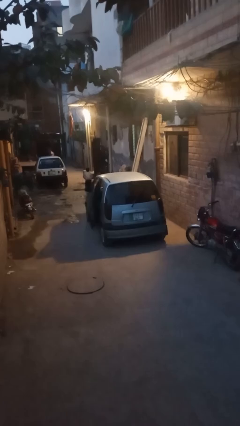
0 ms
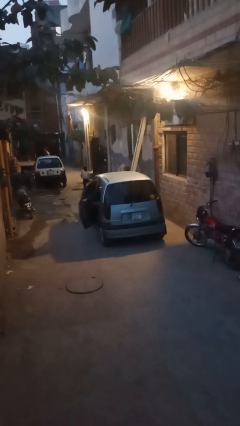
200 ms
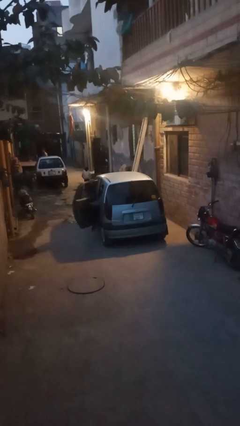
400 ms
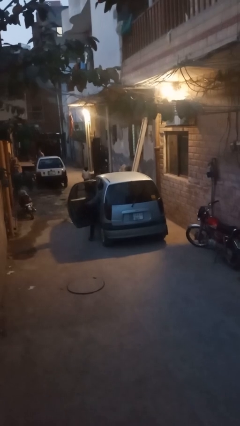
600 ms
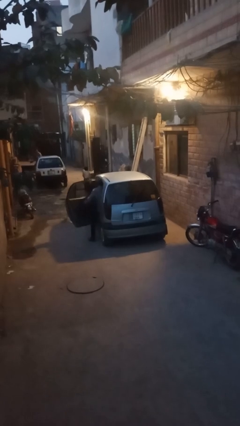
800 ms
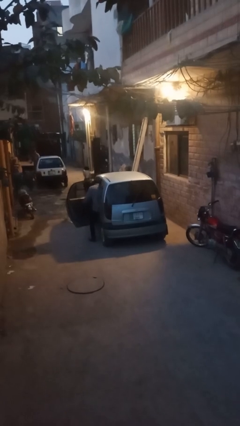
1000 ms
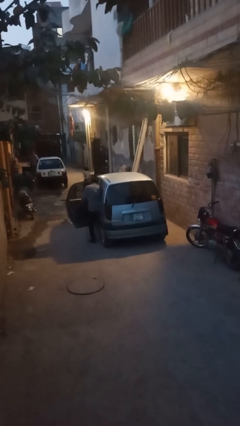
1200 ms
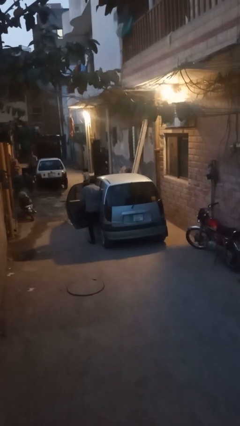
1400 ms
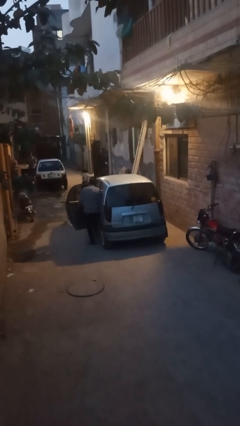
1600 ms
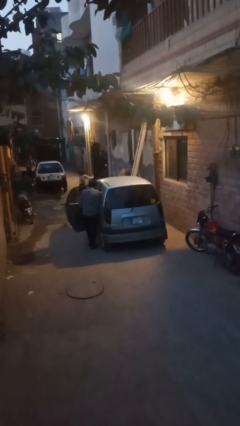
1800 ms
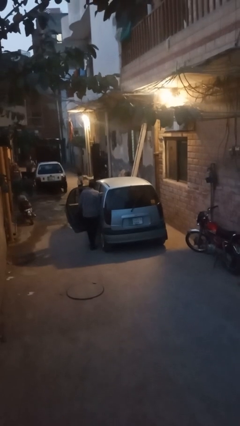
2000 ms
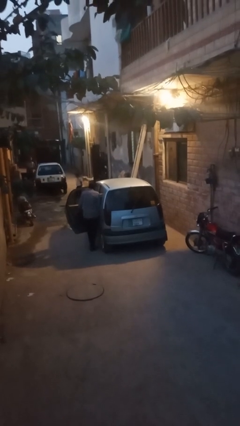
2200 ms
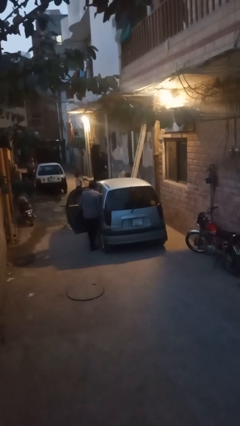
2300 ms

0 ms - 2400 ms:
car drops off person

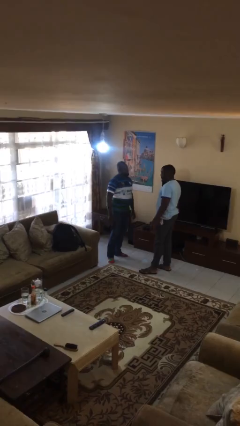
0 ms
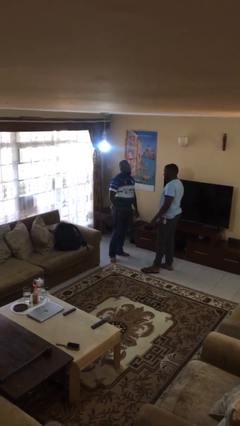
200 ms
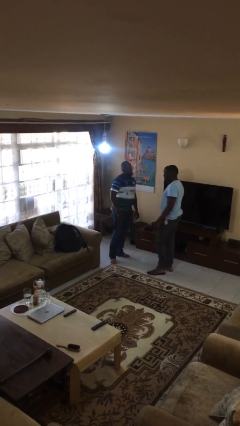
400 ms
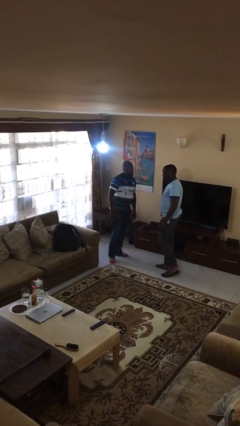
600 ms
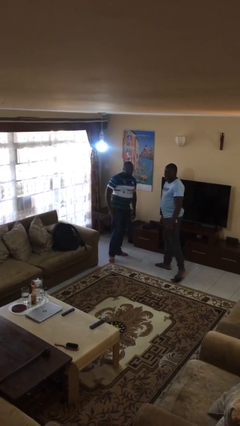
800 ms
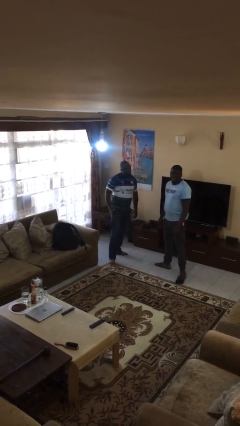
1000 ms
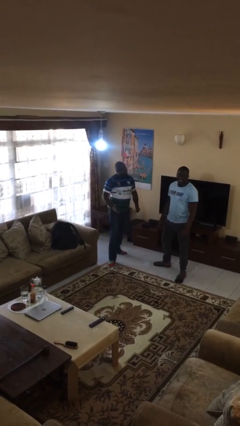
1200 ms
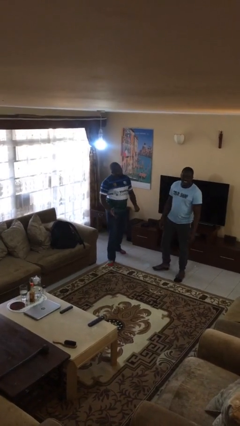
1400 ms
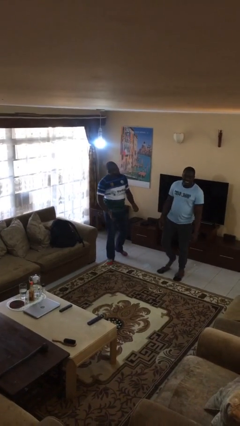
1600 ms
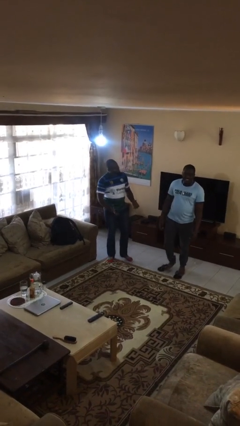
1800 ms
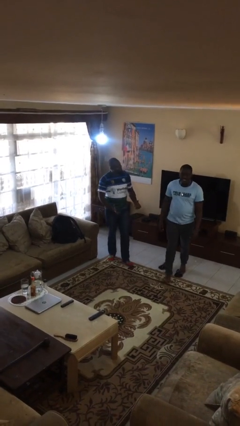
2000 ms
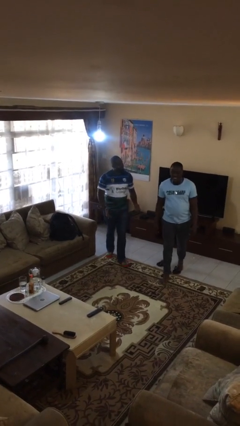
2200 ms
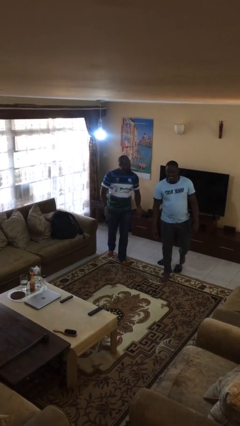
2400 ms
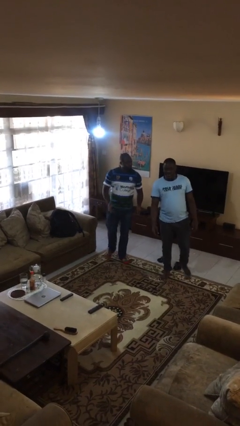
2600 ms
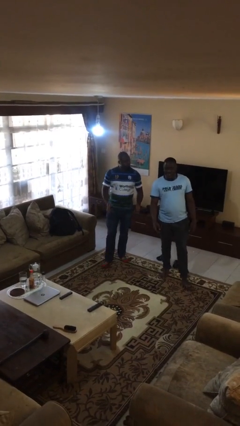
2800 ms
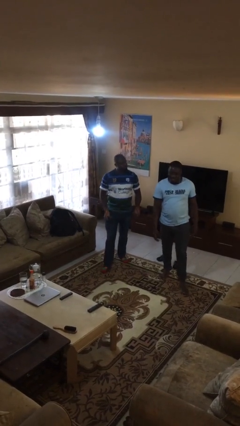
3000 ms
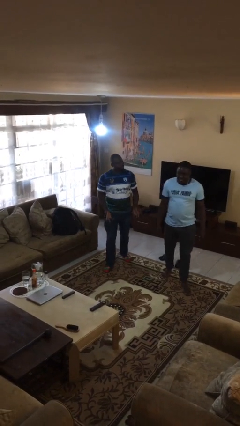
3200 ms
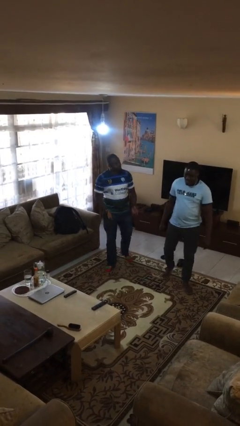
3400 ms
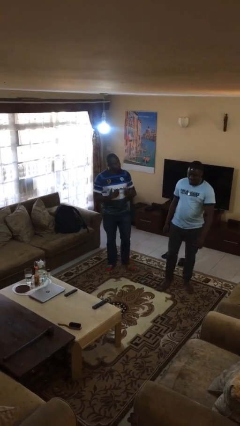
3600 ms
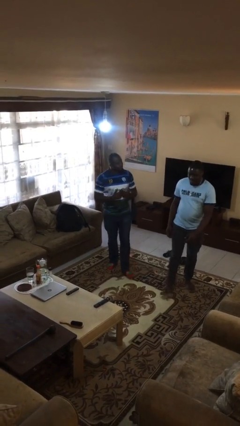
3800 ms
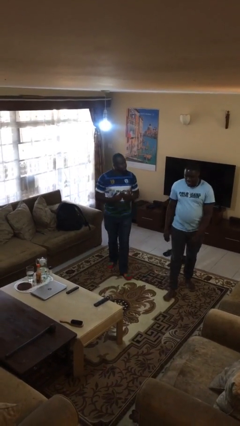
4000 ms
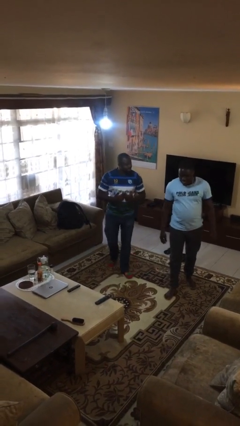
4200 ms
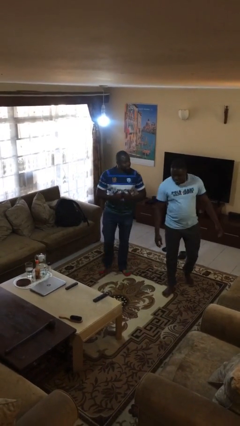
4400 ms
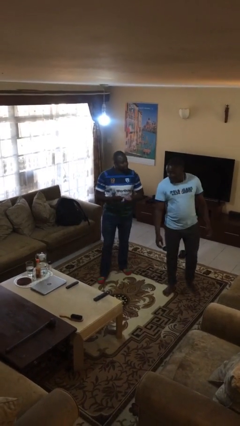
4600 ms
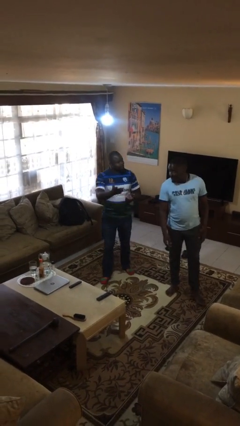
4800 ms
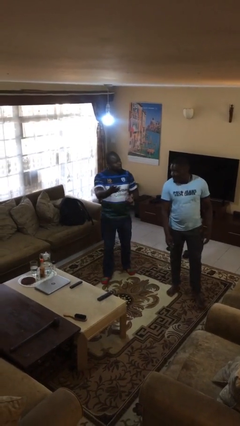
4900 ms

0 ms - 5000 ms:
person talks to person

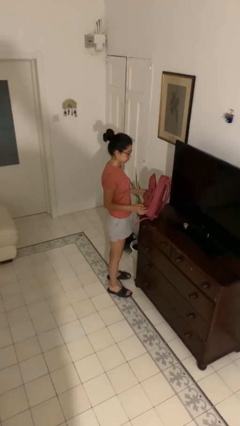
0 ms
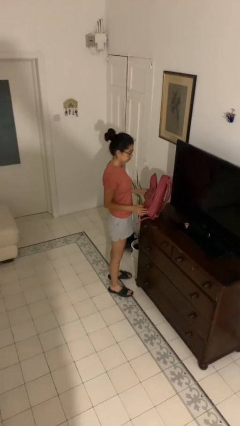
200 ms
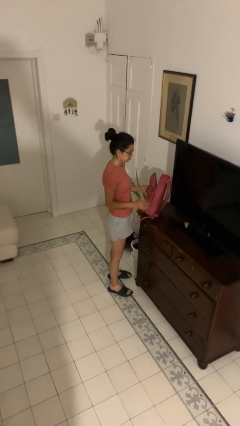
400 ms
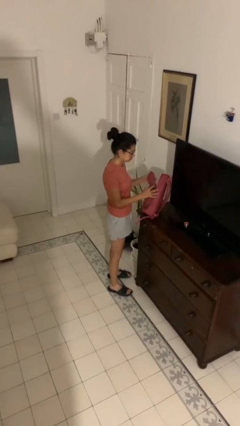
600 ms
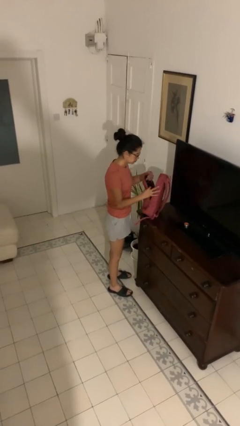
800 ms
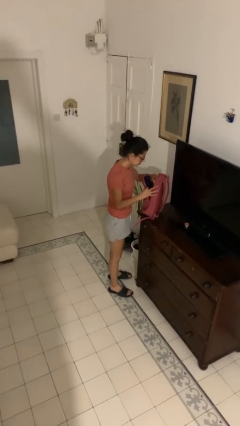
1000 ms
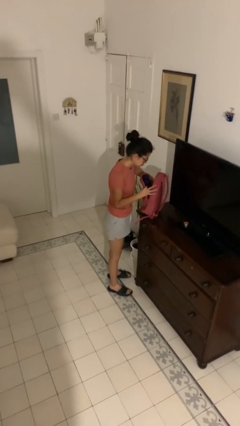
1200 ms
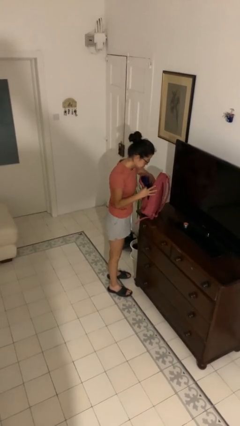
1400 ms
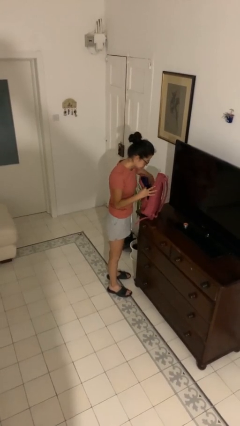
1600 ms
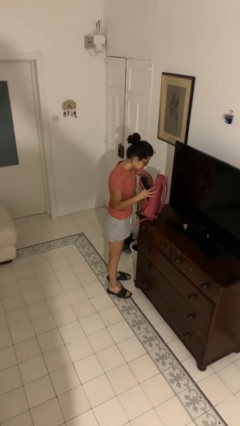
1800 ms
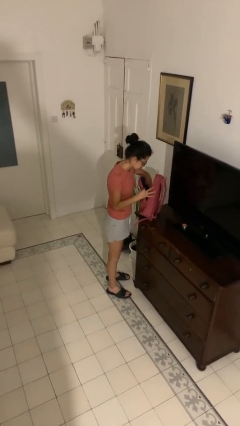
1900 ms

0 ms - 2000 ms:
person searches in backpack

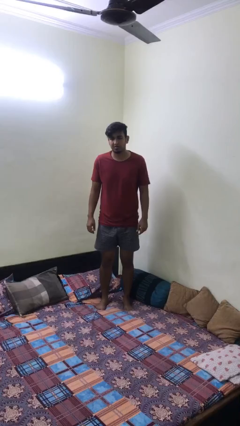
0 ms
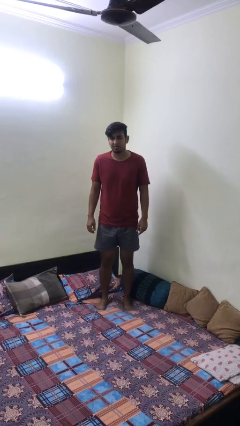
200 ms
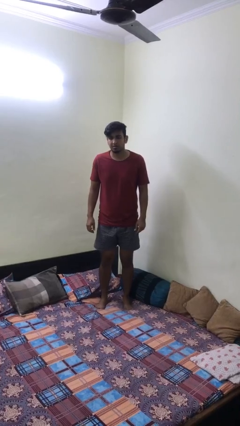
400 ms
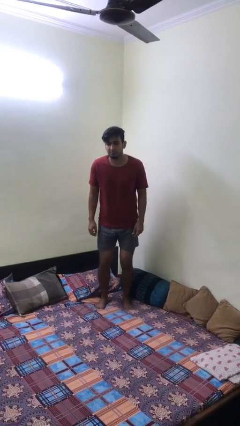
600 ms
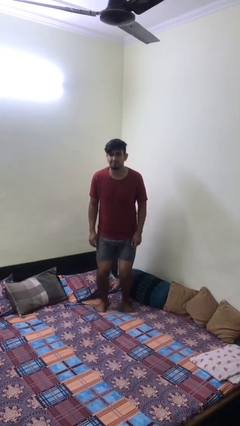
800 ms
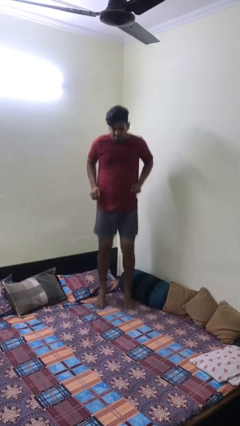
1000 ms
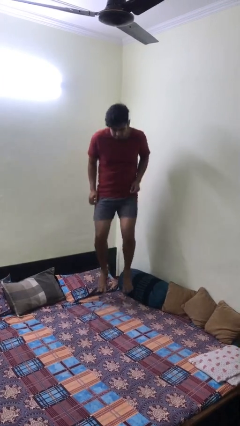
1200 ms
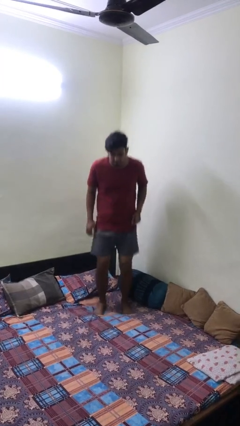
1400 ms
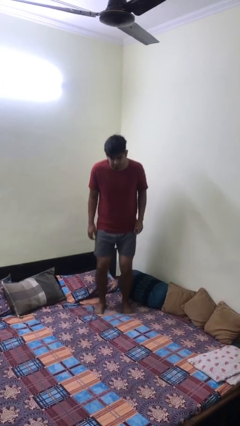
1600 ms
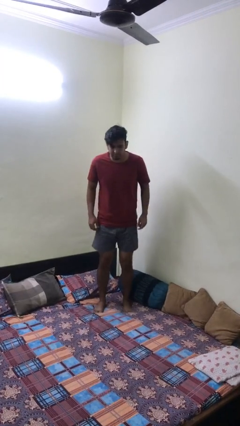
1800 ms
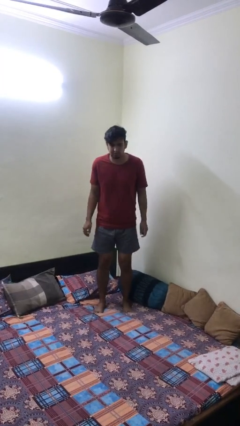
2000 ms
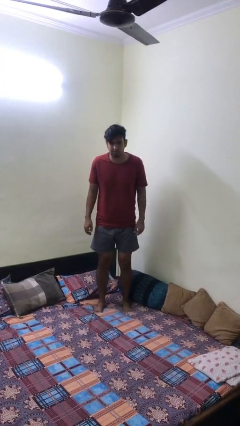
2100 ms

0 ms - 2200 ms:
person jumps on bed

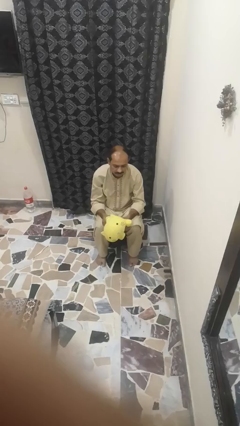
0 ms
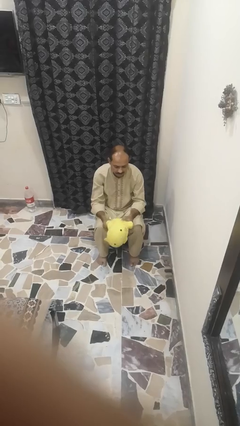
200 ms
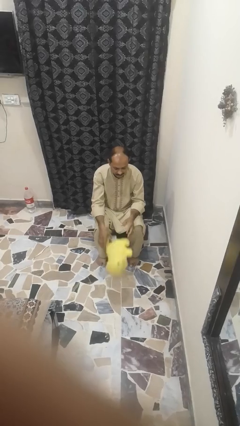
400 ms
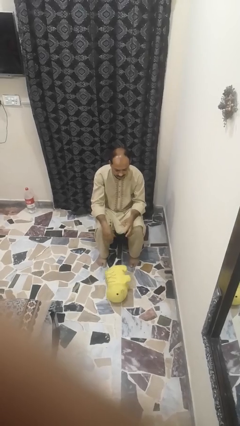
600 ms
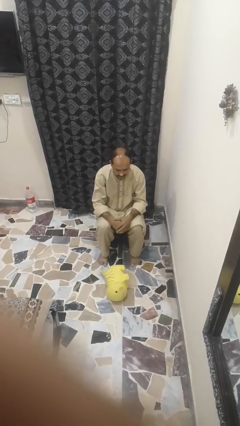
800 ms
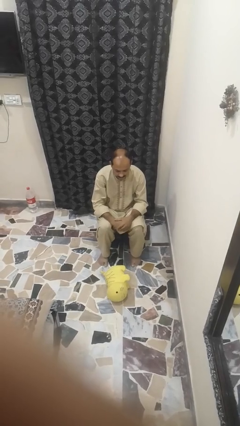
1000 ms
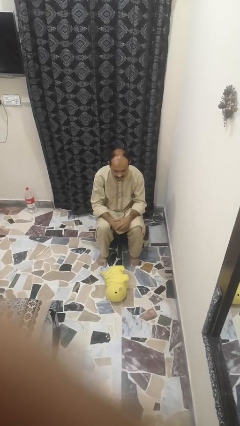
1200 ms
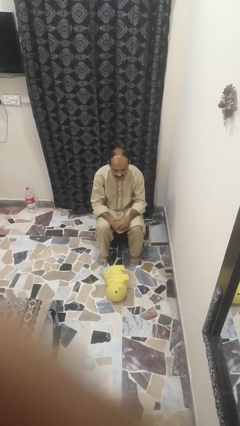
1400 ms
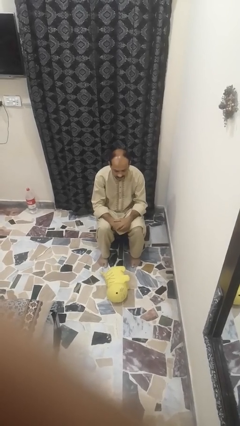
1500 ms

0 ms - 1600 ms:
person drops object

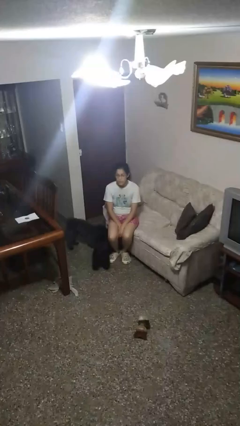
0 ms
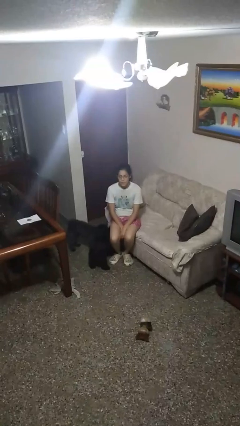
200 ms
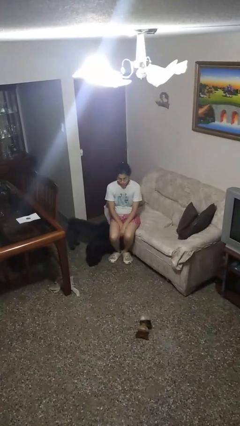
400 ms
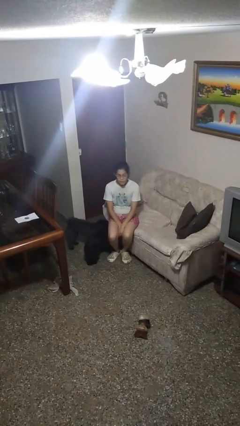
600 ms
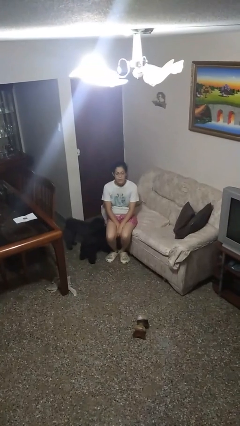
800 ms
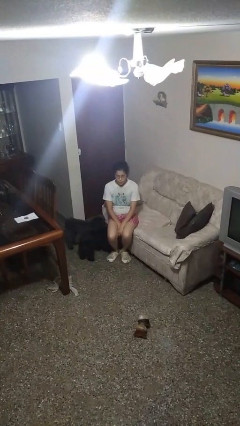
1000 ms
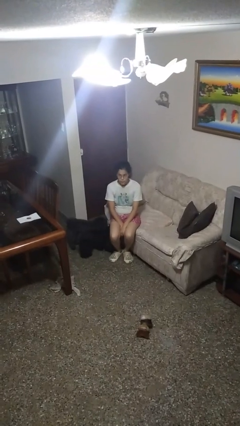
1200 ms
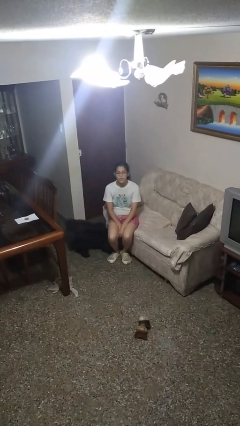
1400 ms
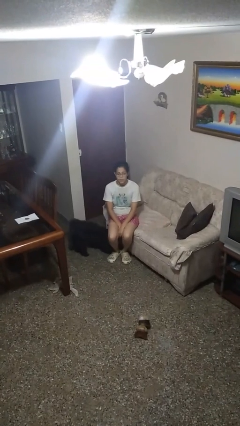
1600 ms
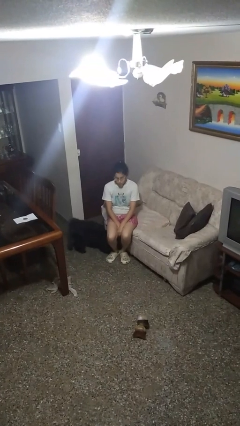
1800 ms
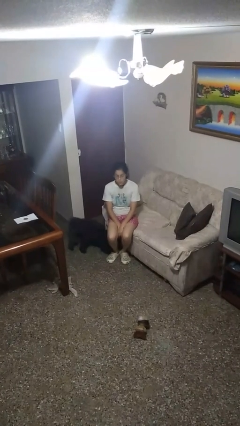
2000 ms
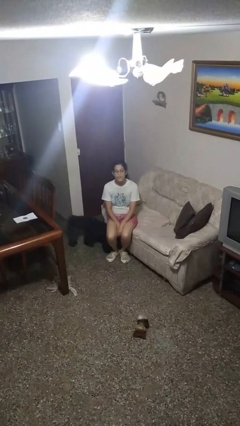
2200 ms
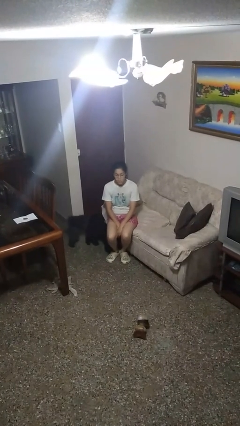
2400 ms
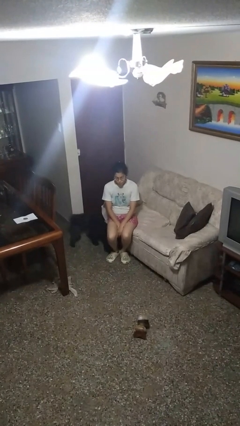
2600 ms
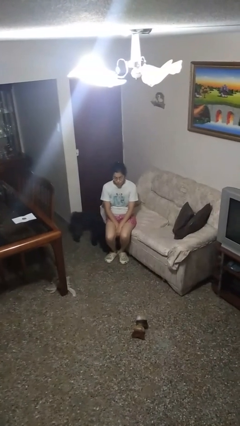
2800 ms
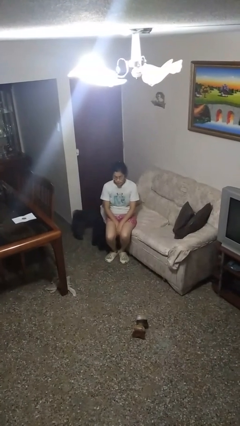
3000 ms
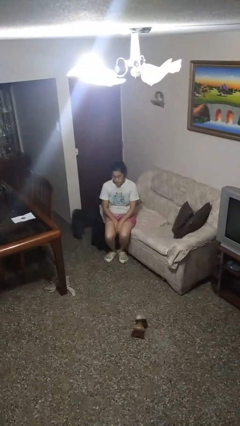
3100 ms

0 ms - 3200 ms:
person nods head

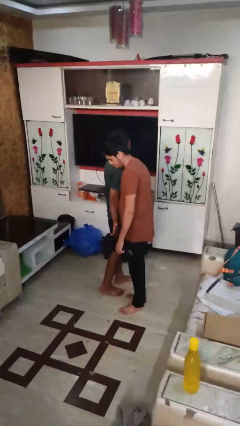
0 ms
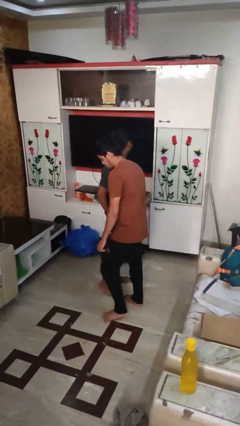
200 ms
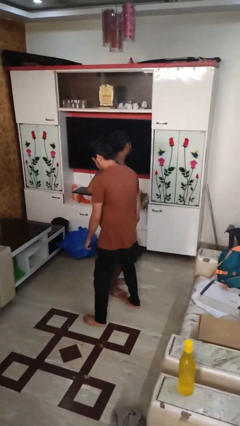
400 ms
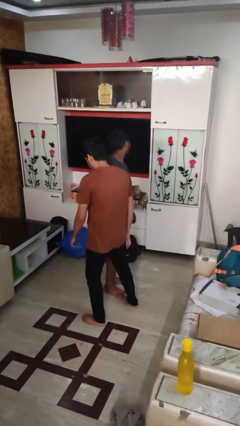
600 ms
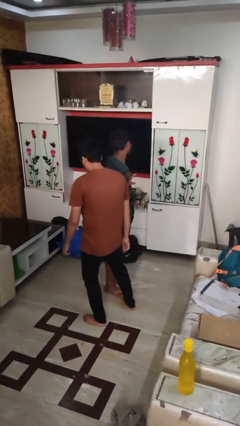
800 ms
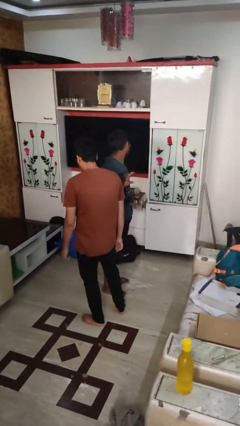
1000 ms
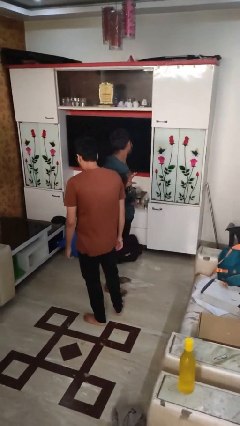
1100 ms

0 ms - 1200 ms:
person bumps into person
